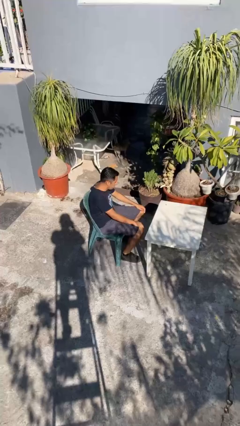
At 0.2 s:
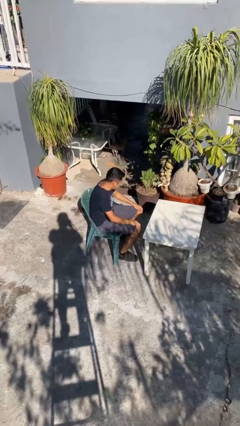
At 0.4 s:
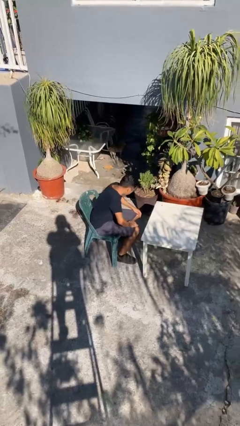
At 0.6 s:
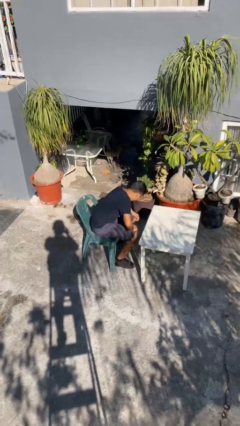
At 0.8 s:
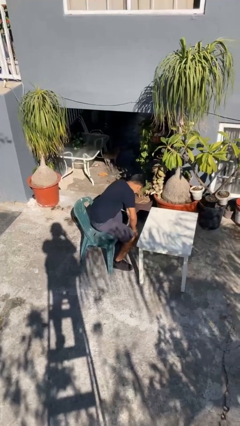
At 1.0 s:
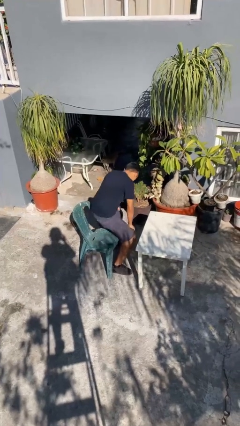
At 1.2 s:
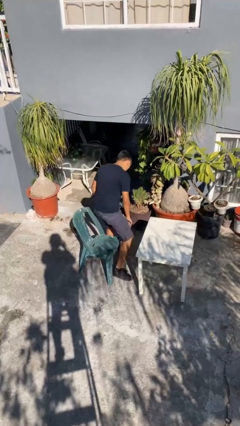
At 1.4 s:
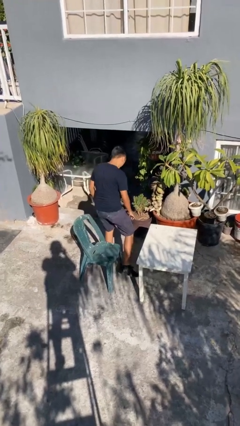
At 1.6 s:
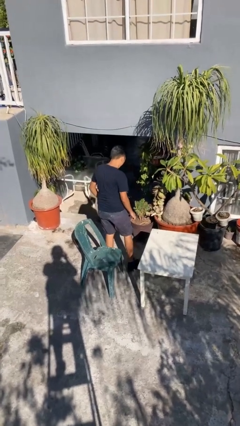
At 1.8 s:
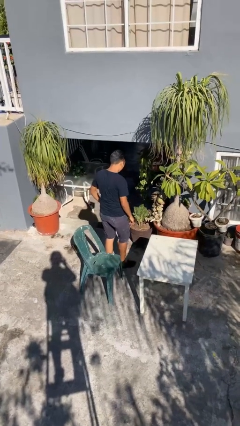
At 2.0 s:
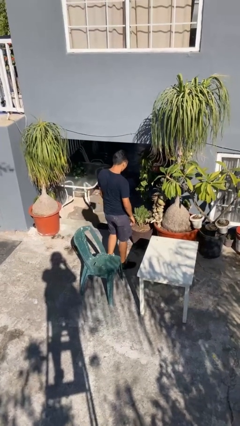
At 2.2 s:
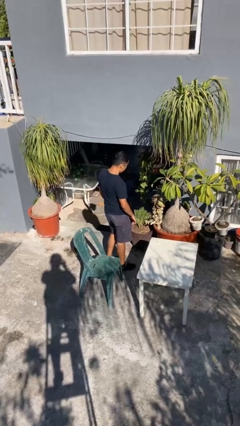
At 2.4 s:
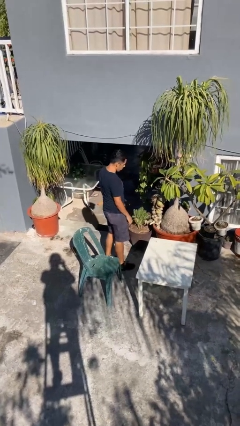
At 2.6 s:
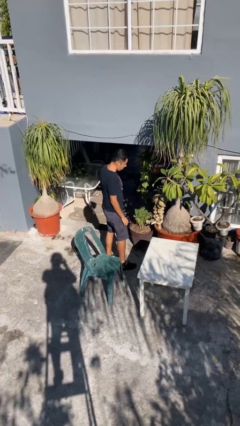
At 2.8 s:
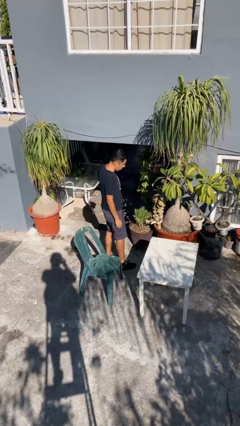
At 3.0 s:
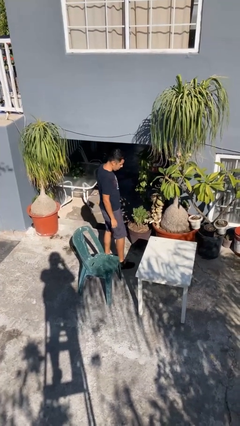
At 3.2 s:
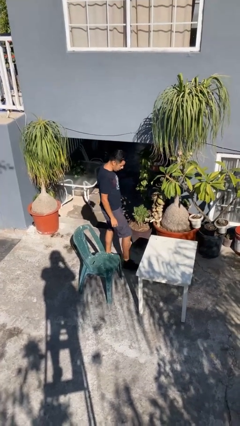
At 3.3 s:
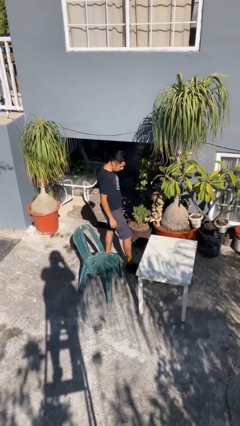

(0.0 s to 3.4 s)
person stands up

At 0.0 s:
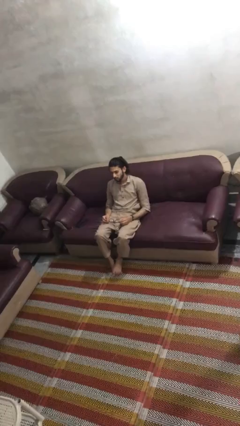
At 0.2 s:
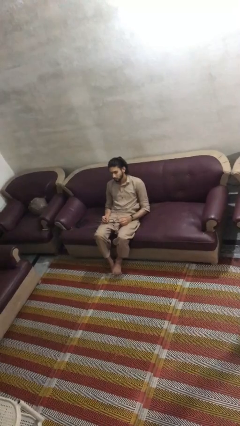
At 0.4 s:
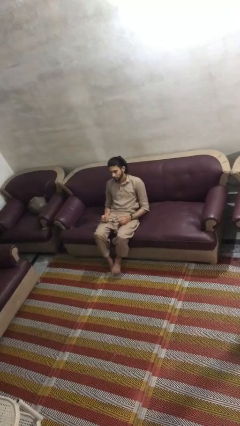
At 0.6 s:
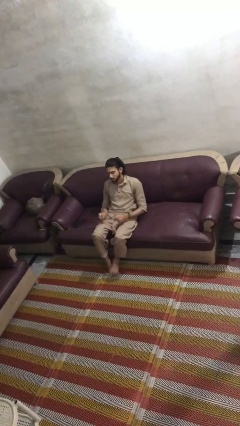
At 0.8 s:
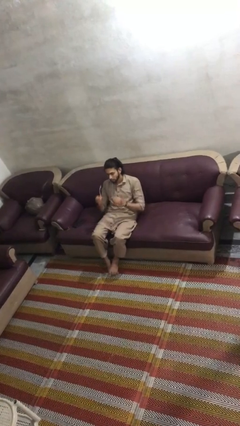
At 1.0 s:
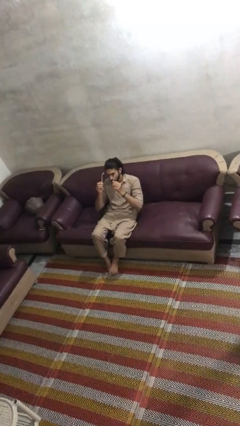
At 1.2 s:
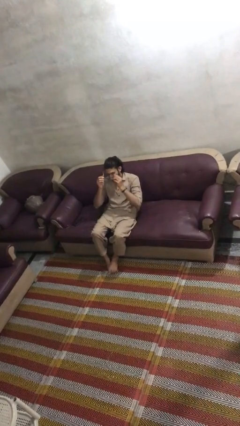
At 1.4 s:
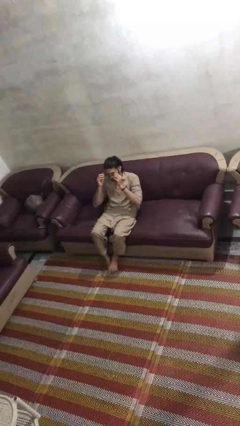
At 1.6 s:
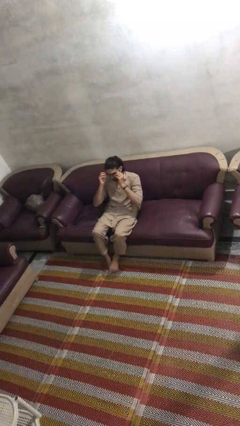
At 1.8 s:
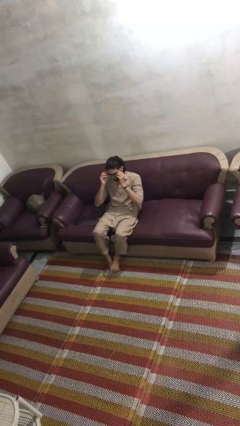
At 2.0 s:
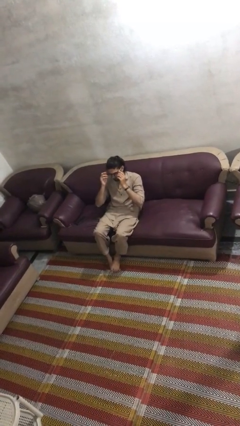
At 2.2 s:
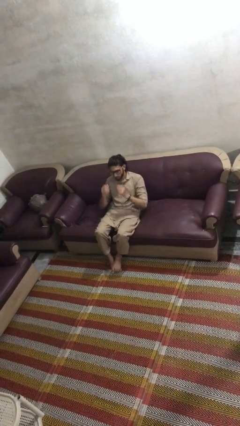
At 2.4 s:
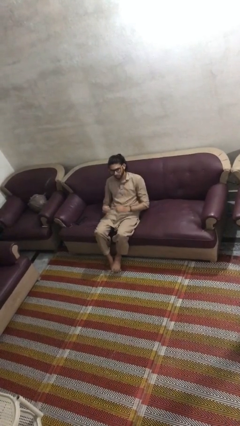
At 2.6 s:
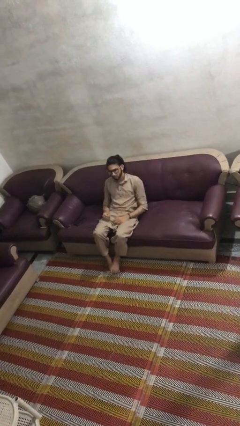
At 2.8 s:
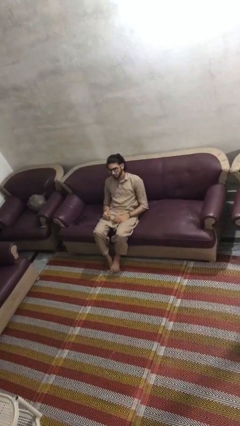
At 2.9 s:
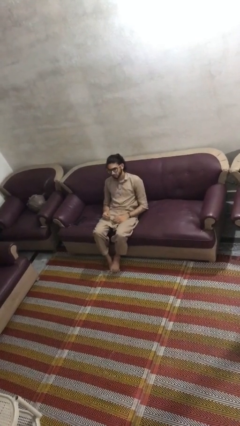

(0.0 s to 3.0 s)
person puts on glasses

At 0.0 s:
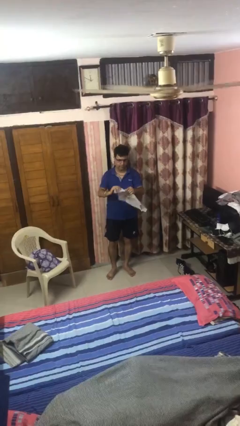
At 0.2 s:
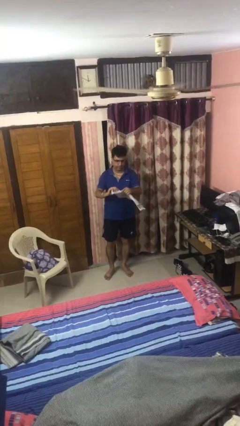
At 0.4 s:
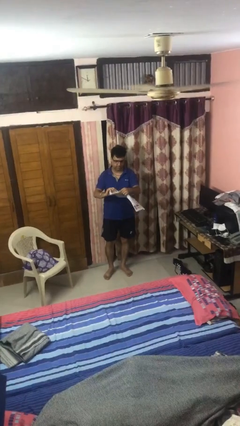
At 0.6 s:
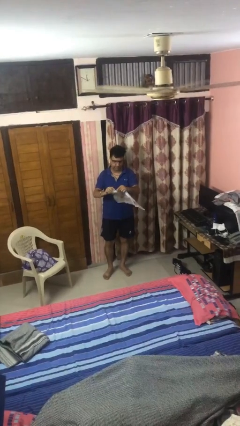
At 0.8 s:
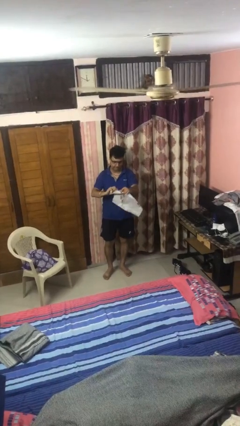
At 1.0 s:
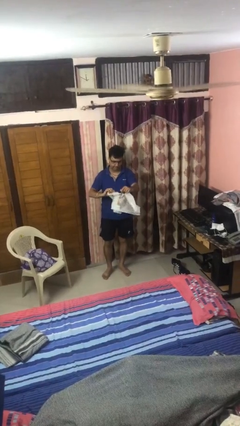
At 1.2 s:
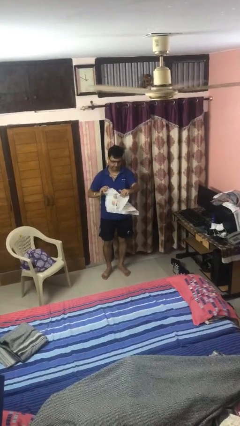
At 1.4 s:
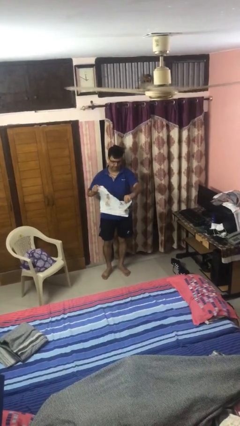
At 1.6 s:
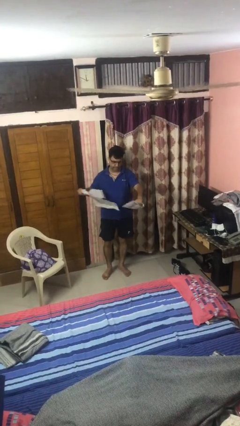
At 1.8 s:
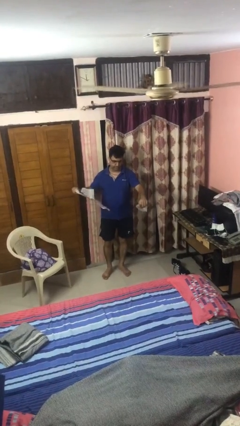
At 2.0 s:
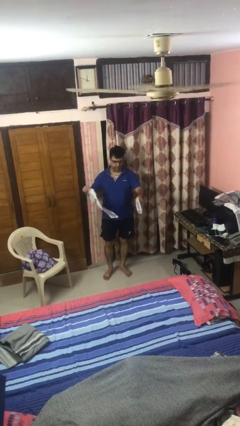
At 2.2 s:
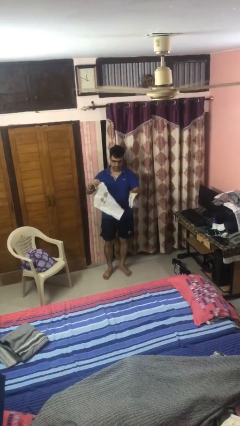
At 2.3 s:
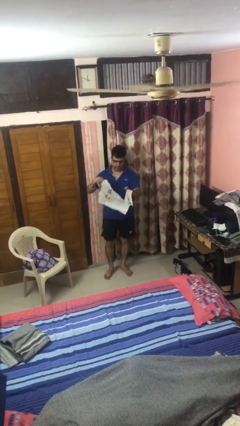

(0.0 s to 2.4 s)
person tears paper

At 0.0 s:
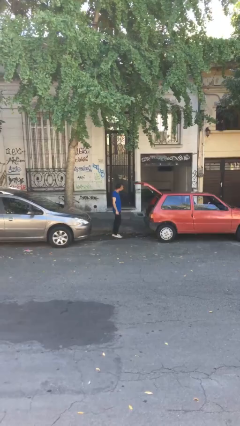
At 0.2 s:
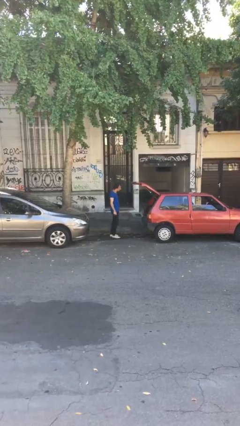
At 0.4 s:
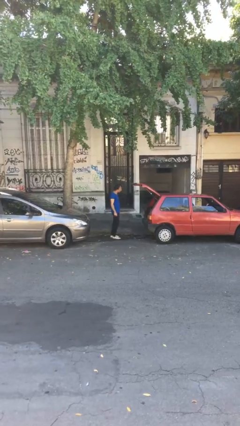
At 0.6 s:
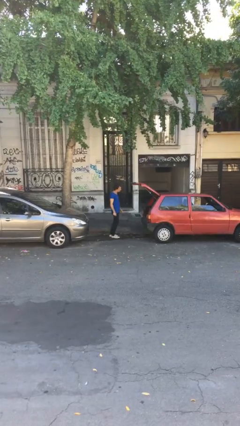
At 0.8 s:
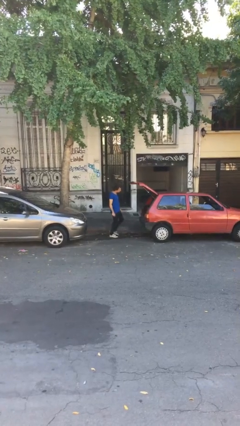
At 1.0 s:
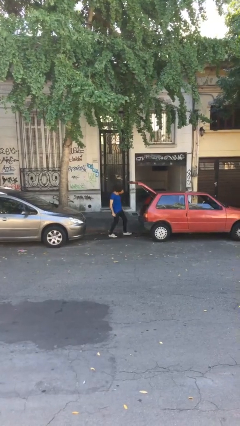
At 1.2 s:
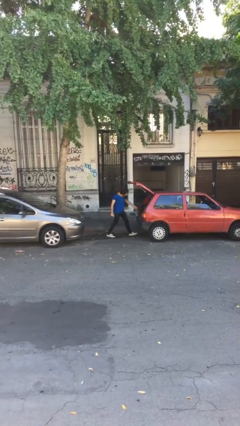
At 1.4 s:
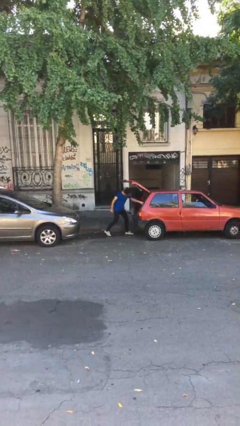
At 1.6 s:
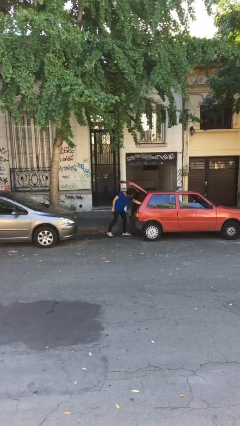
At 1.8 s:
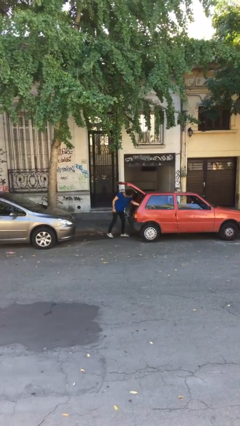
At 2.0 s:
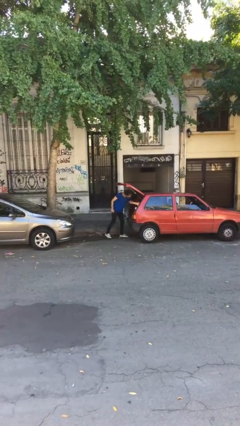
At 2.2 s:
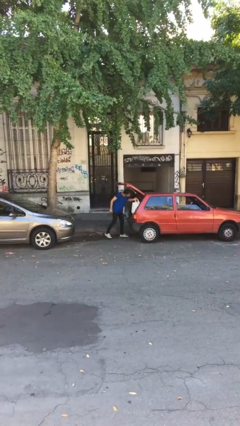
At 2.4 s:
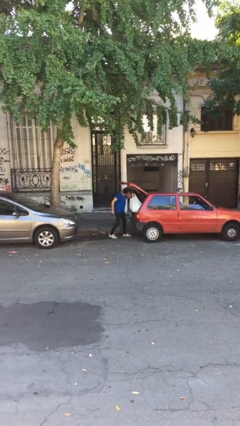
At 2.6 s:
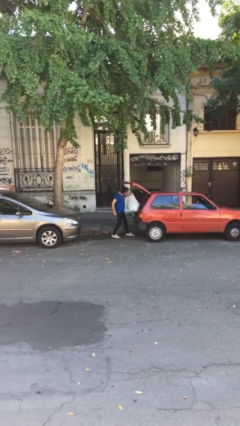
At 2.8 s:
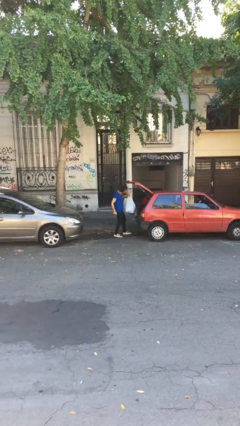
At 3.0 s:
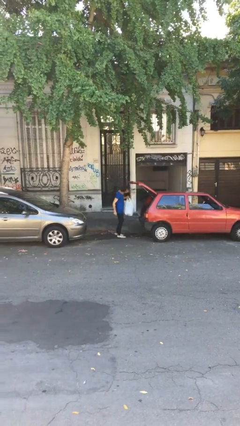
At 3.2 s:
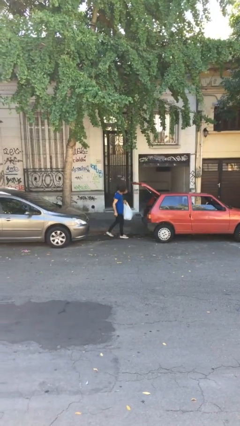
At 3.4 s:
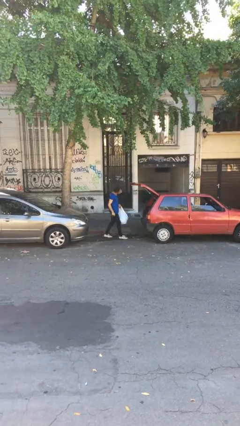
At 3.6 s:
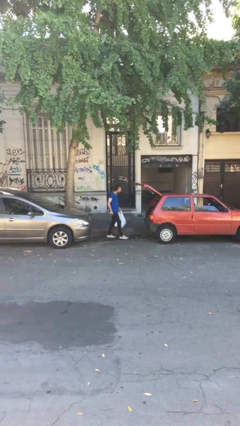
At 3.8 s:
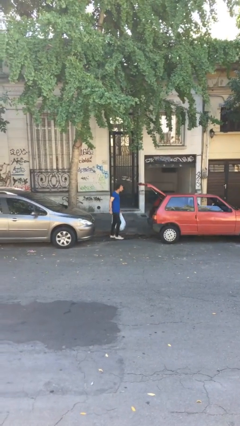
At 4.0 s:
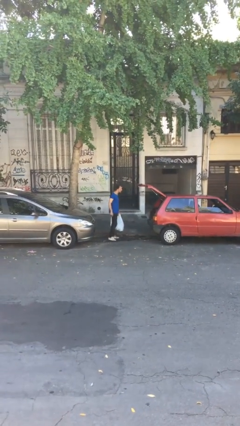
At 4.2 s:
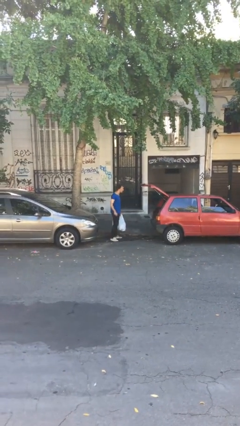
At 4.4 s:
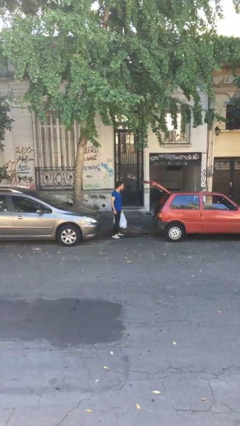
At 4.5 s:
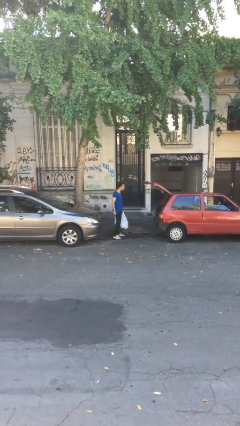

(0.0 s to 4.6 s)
person unloads car

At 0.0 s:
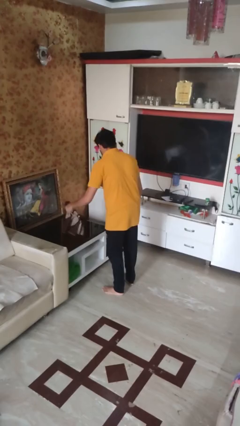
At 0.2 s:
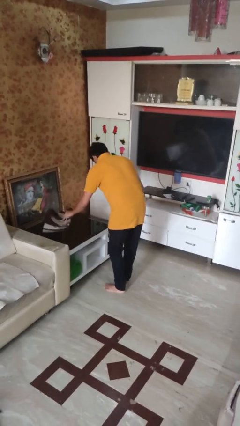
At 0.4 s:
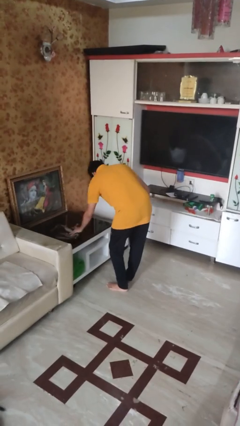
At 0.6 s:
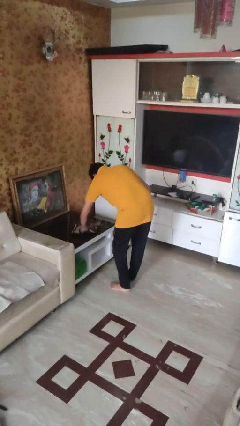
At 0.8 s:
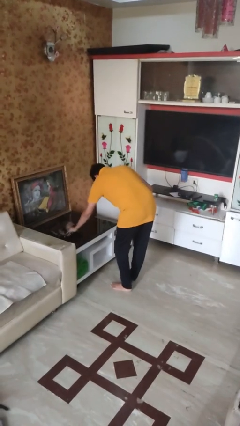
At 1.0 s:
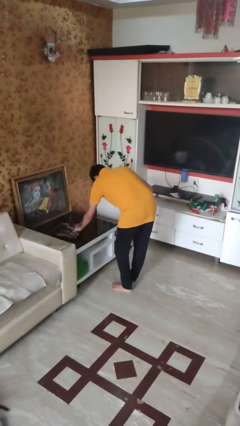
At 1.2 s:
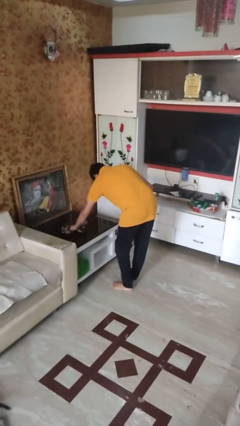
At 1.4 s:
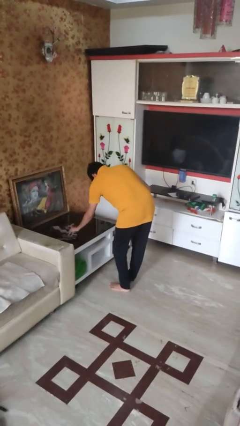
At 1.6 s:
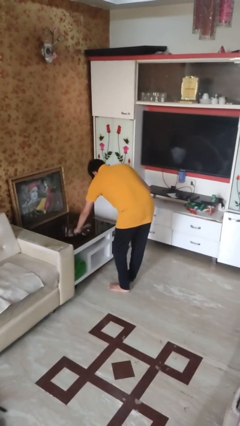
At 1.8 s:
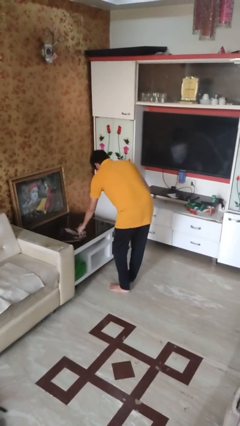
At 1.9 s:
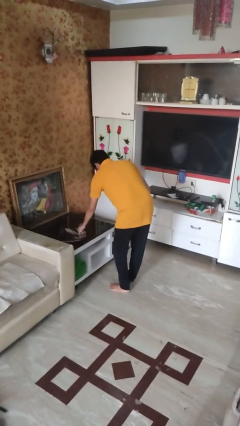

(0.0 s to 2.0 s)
person cleans table with rag

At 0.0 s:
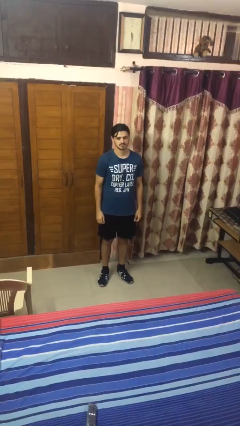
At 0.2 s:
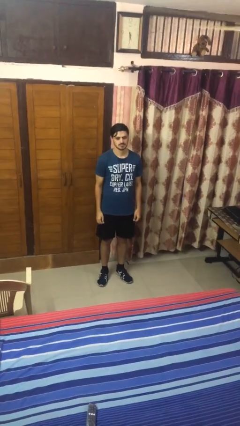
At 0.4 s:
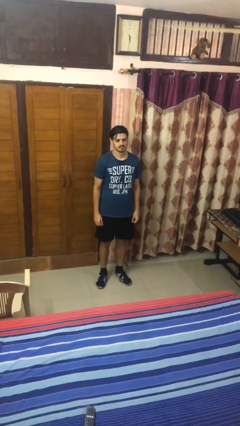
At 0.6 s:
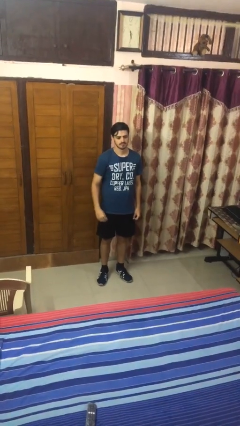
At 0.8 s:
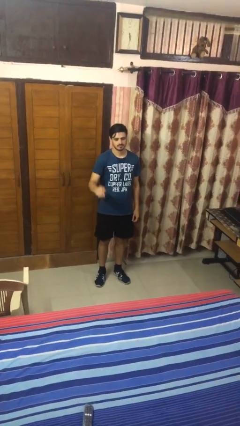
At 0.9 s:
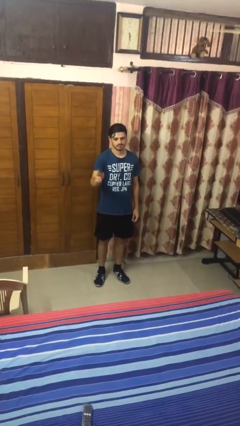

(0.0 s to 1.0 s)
person gestures swipe left

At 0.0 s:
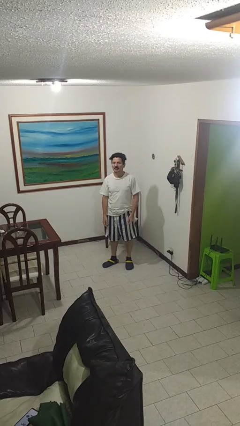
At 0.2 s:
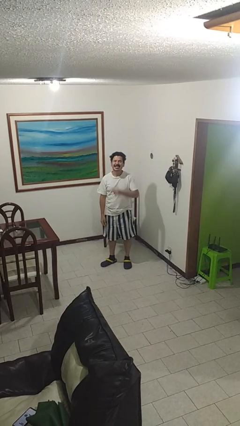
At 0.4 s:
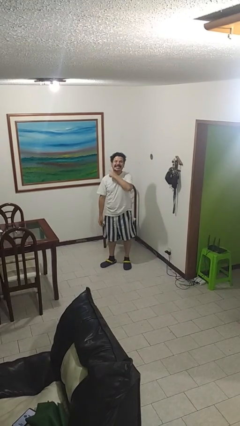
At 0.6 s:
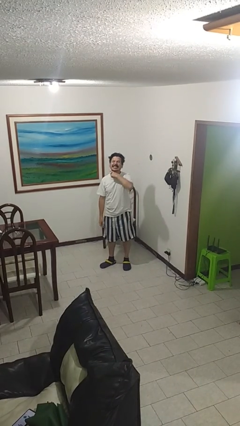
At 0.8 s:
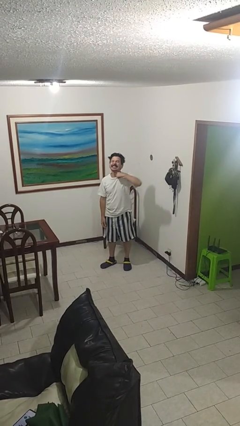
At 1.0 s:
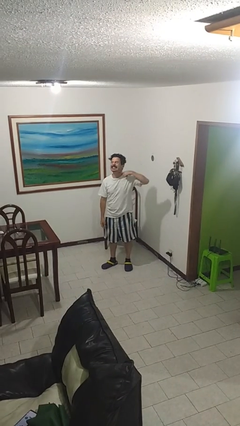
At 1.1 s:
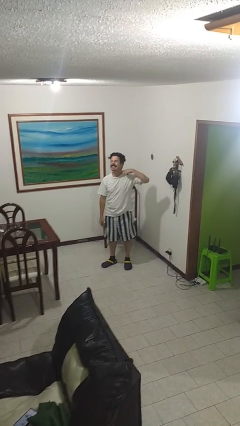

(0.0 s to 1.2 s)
person gestures cut
